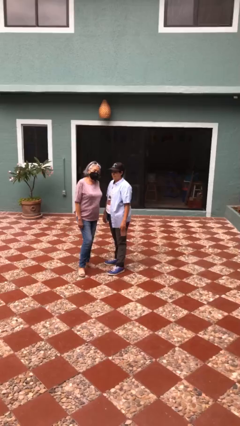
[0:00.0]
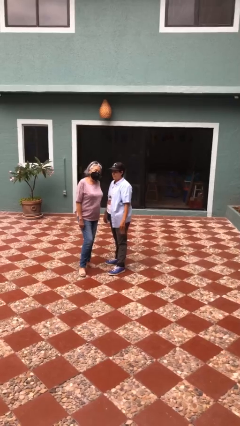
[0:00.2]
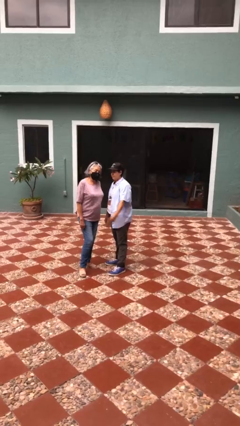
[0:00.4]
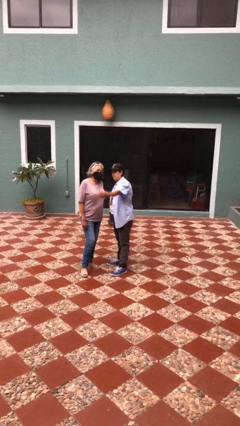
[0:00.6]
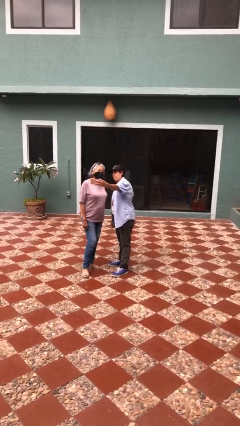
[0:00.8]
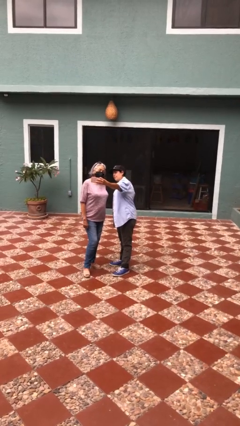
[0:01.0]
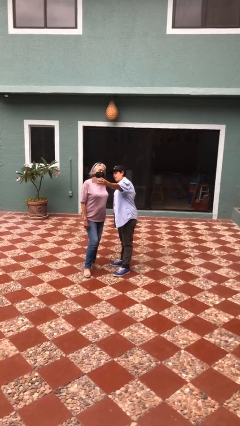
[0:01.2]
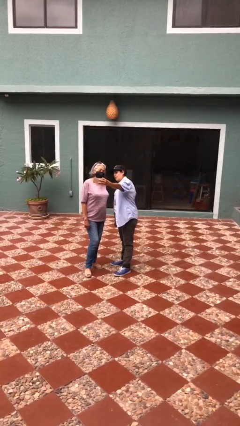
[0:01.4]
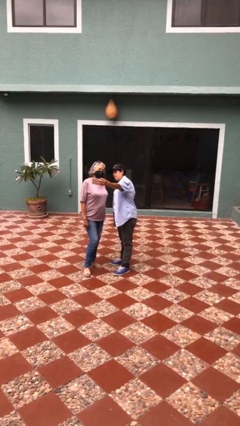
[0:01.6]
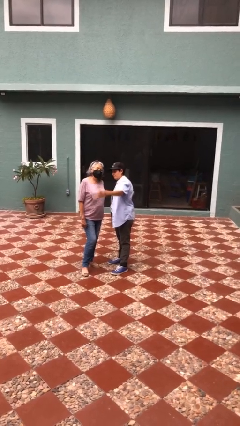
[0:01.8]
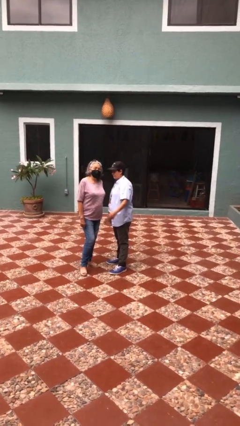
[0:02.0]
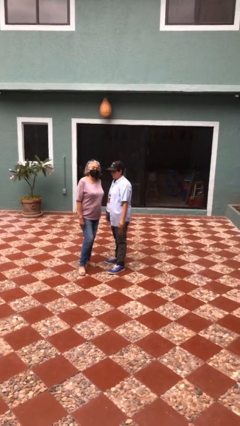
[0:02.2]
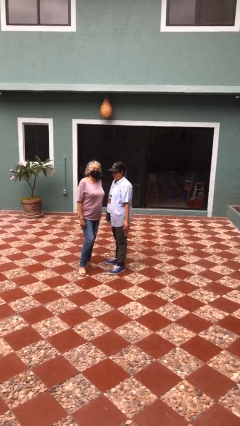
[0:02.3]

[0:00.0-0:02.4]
person takes selfie with person

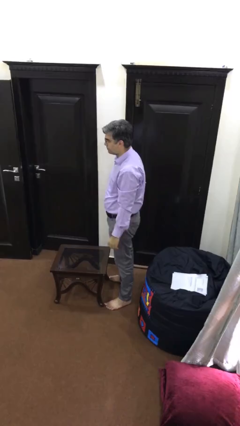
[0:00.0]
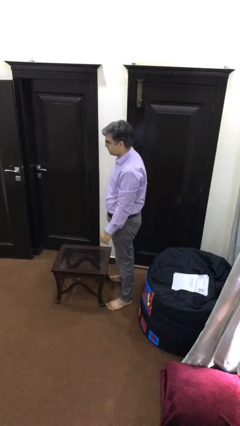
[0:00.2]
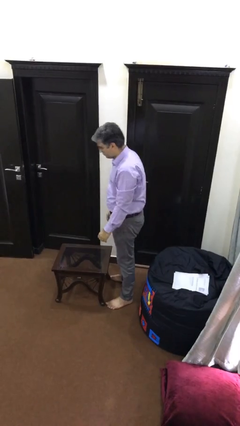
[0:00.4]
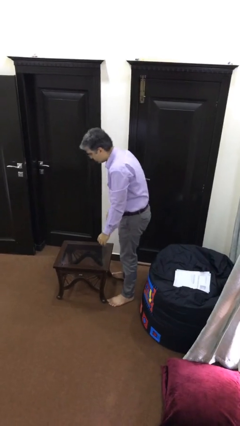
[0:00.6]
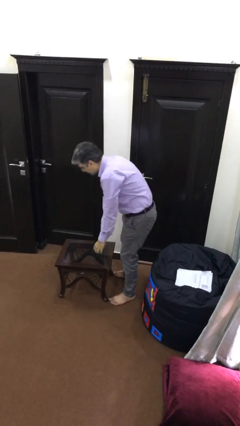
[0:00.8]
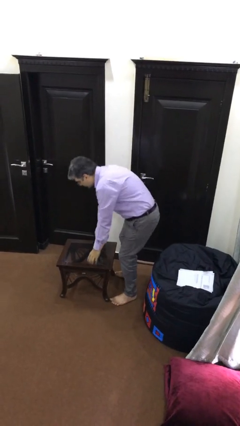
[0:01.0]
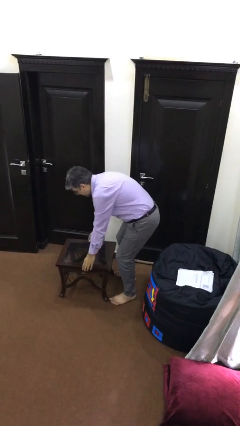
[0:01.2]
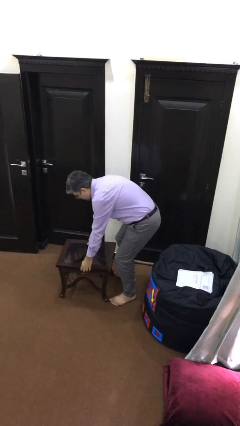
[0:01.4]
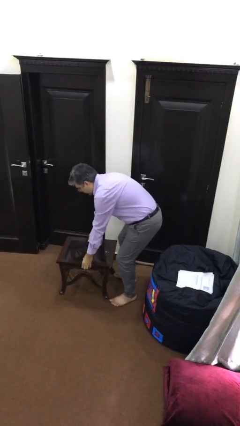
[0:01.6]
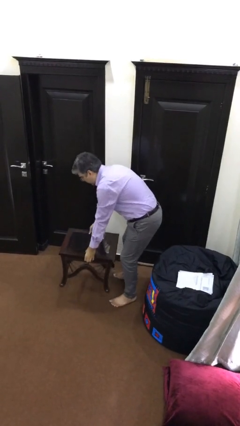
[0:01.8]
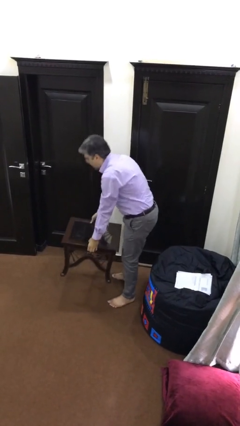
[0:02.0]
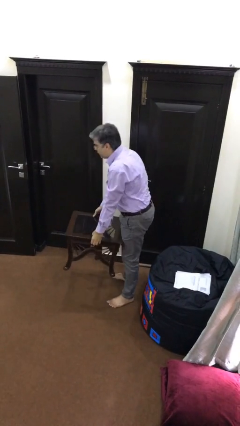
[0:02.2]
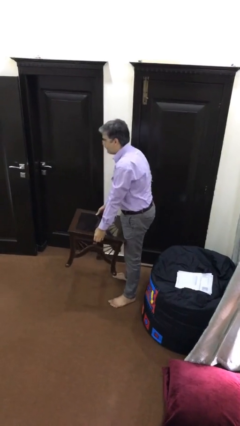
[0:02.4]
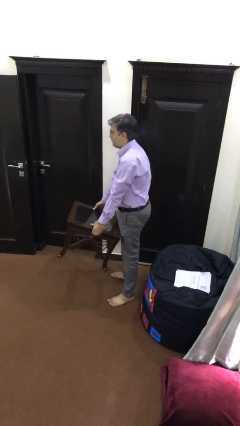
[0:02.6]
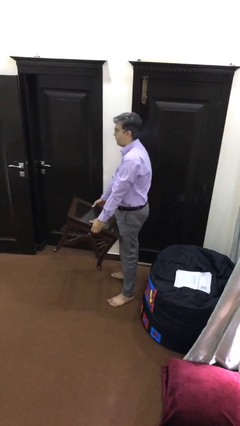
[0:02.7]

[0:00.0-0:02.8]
person picks up object from floor

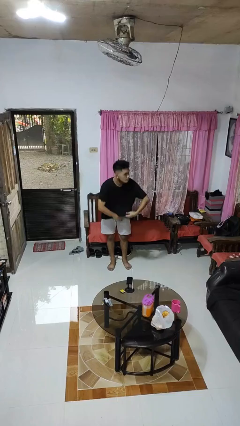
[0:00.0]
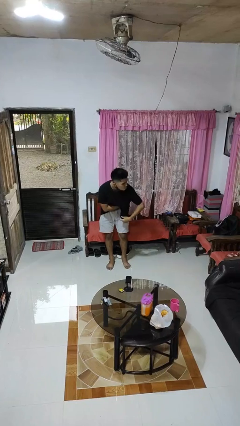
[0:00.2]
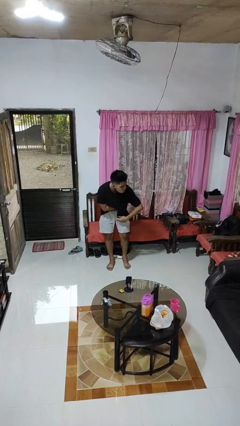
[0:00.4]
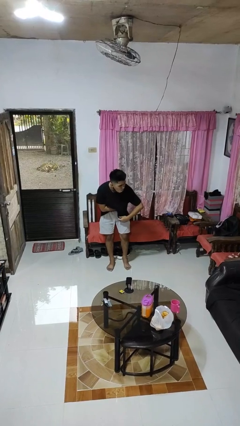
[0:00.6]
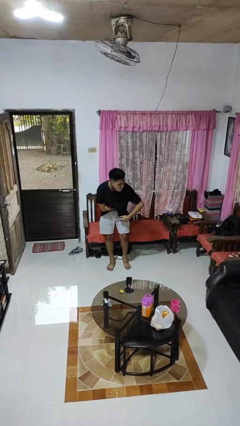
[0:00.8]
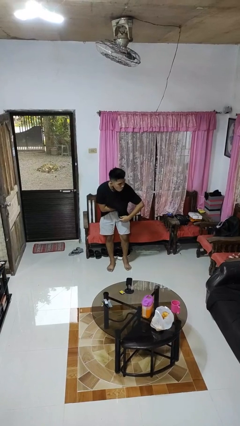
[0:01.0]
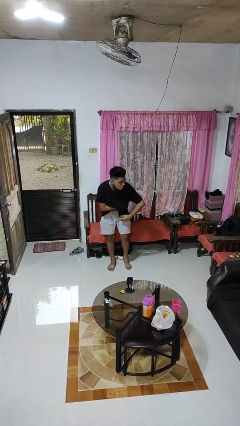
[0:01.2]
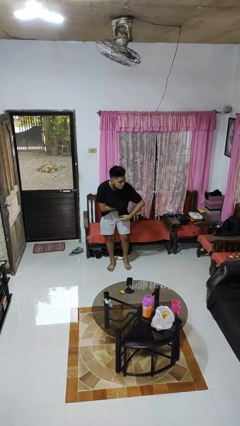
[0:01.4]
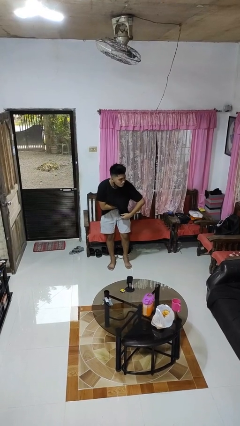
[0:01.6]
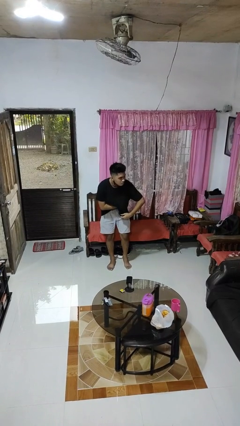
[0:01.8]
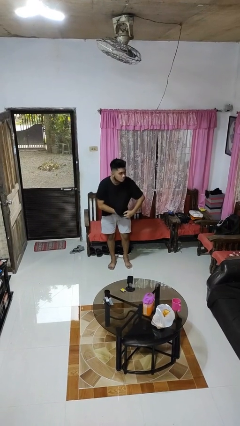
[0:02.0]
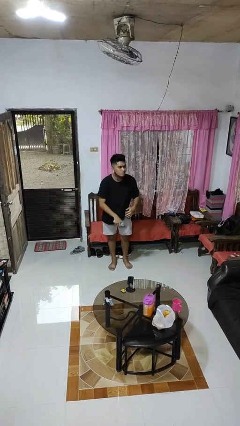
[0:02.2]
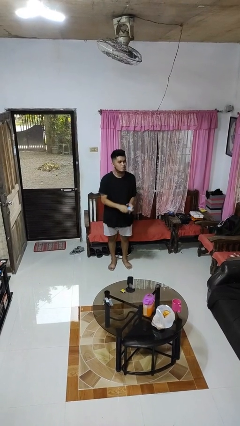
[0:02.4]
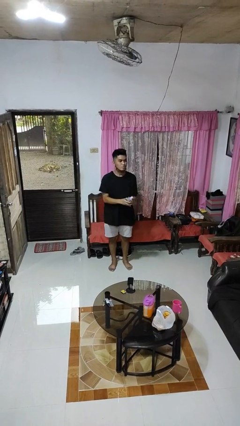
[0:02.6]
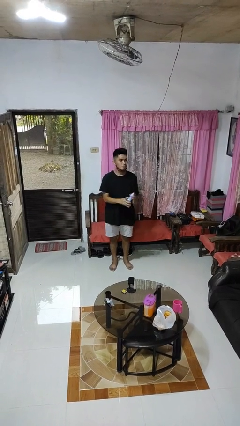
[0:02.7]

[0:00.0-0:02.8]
person applies deodorant

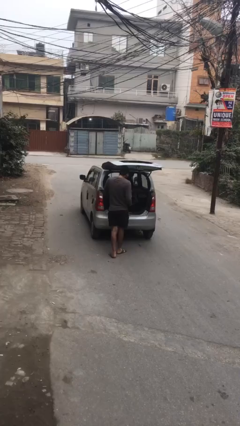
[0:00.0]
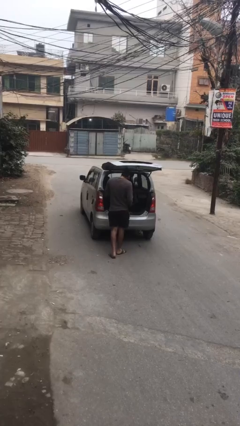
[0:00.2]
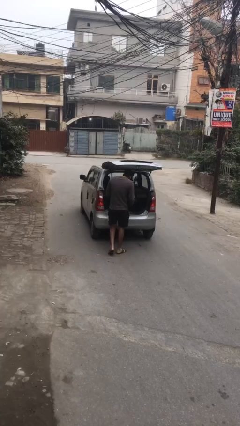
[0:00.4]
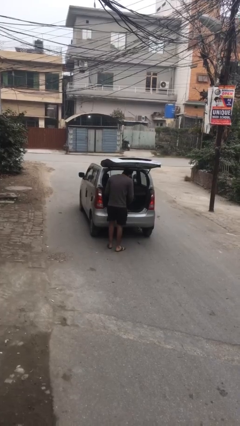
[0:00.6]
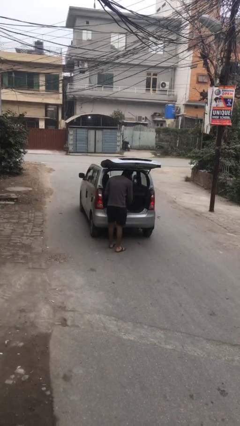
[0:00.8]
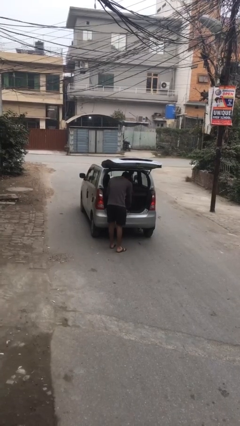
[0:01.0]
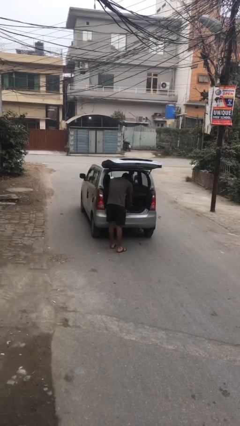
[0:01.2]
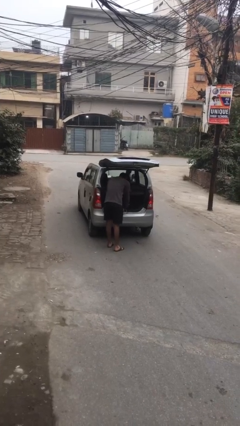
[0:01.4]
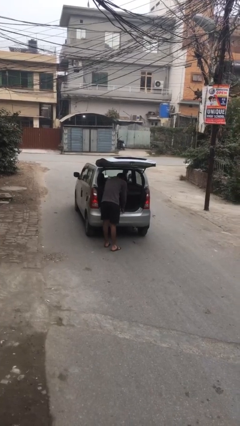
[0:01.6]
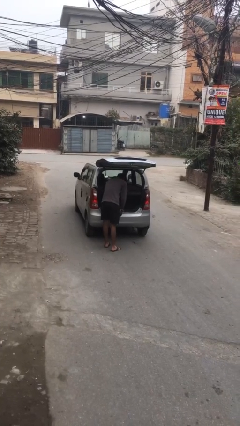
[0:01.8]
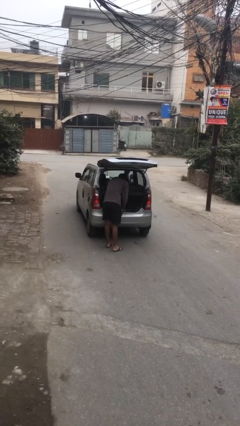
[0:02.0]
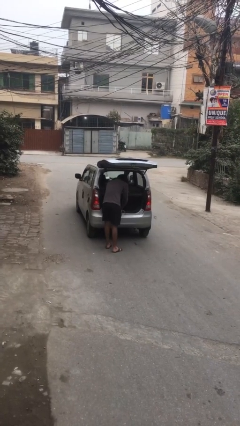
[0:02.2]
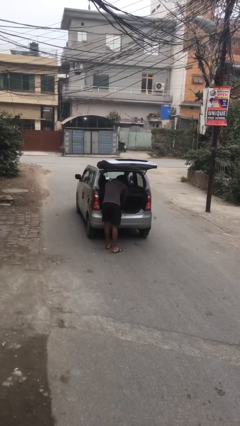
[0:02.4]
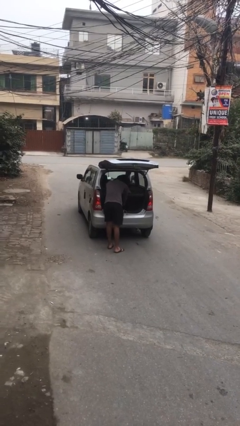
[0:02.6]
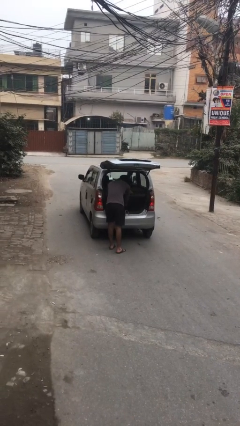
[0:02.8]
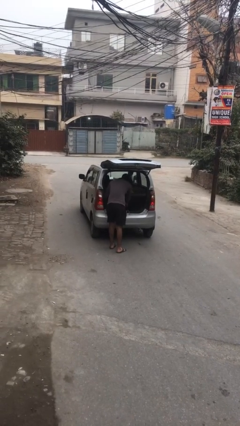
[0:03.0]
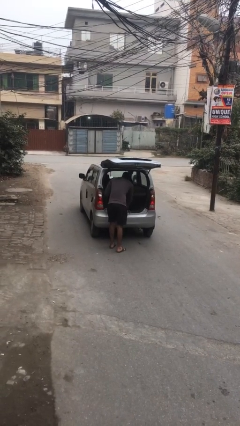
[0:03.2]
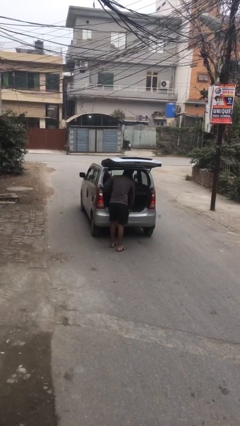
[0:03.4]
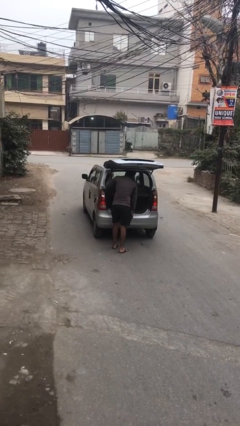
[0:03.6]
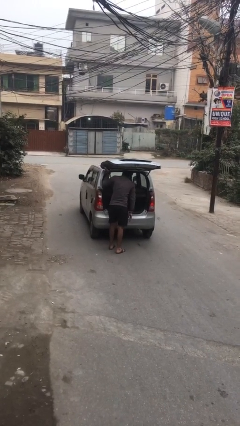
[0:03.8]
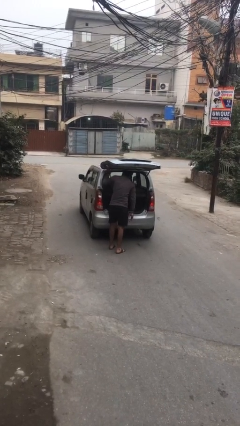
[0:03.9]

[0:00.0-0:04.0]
person loads car

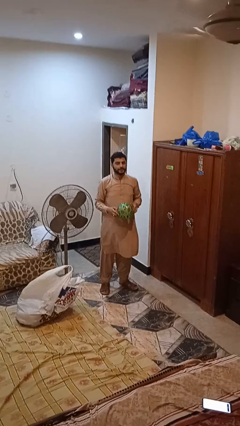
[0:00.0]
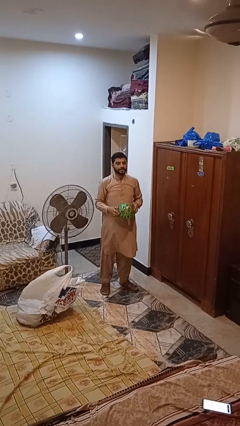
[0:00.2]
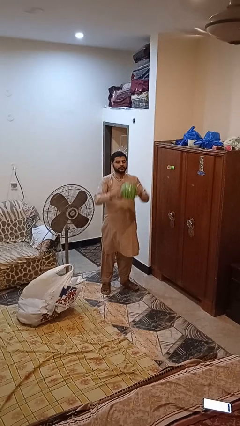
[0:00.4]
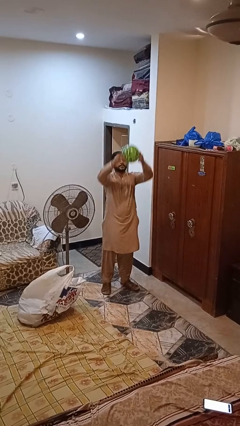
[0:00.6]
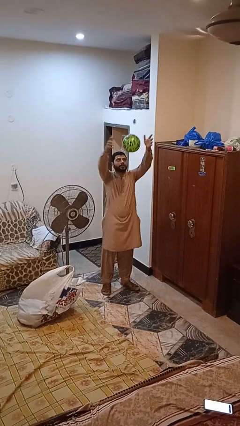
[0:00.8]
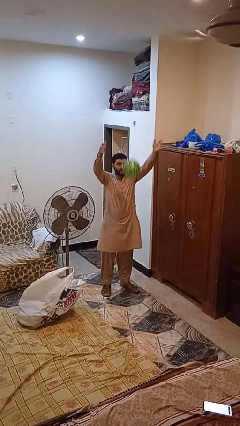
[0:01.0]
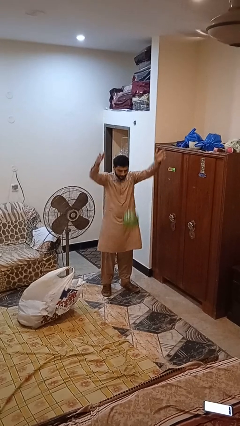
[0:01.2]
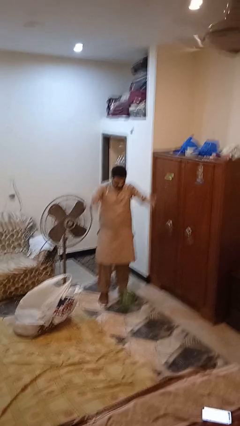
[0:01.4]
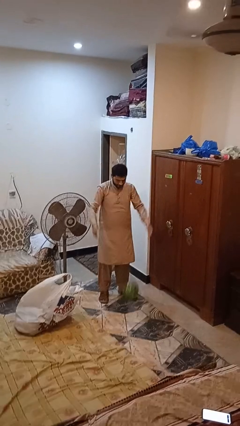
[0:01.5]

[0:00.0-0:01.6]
person drops object

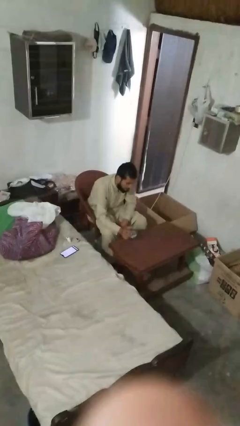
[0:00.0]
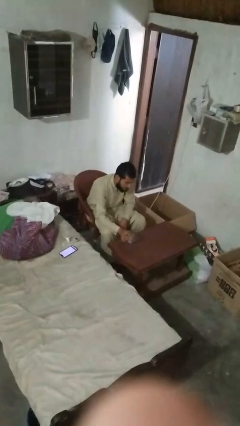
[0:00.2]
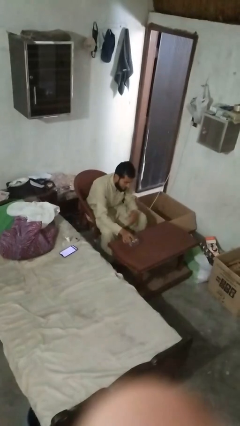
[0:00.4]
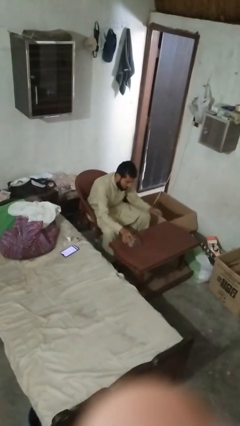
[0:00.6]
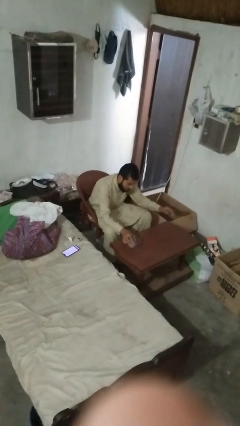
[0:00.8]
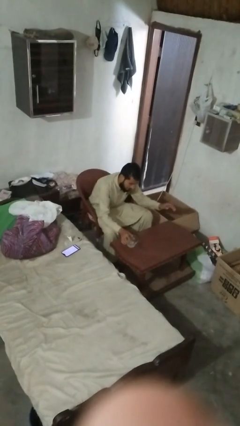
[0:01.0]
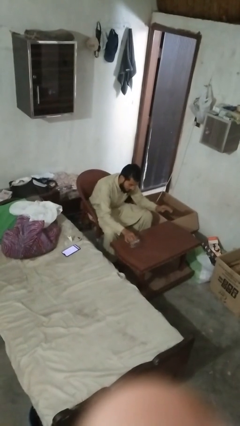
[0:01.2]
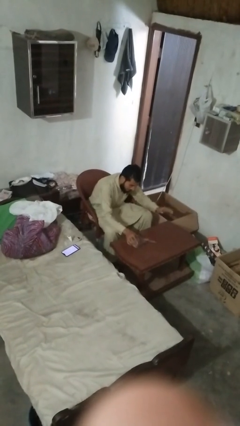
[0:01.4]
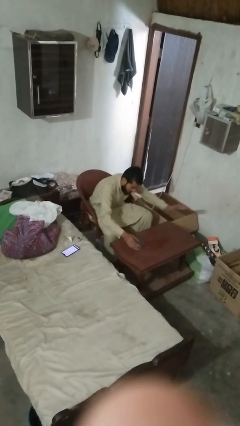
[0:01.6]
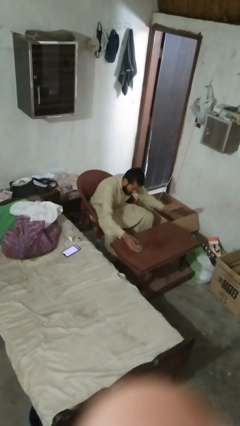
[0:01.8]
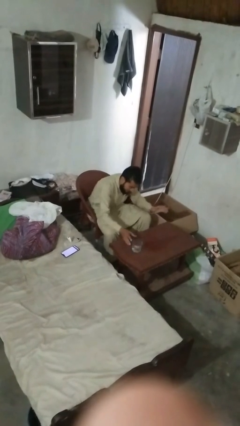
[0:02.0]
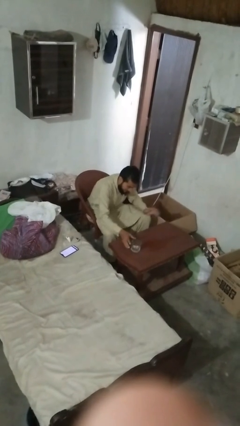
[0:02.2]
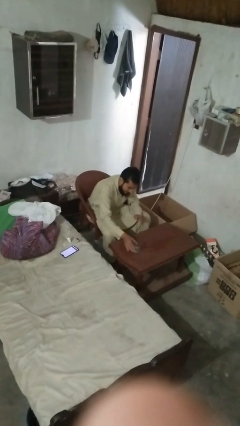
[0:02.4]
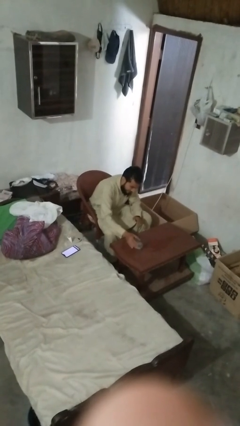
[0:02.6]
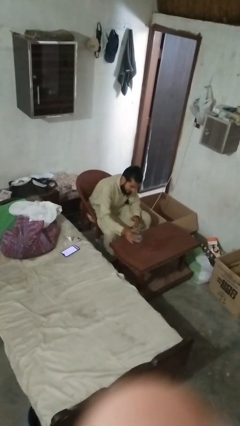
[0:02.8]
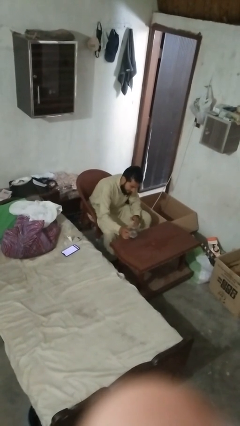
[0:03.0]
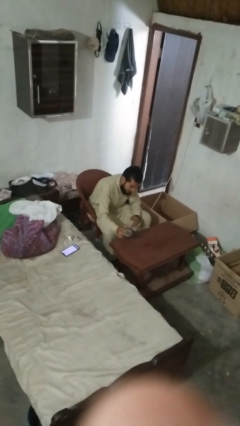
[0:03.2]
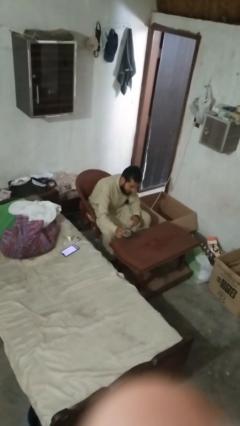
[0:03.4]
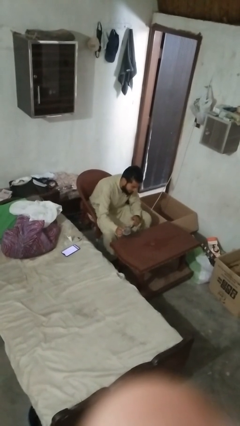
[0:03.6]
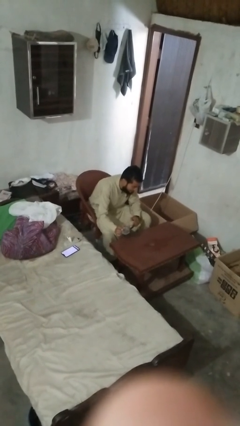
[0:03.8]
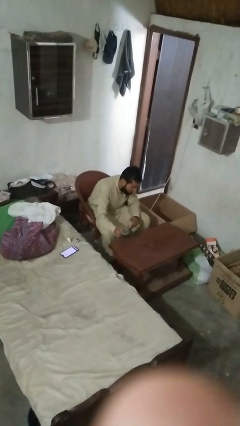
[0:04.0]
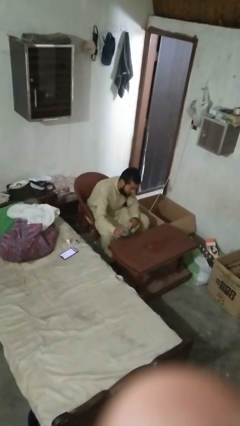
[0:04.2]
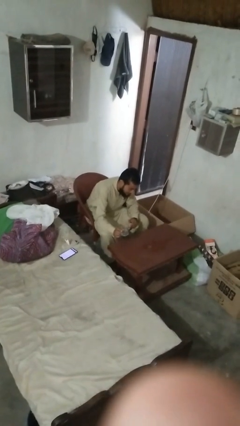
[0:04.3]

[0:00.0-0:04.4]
person spills on table
